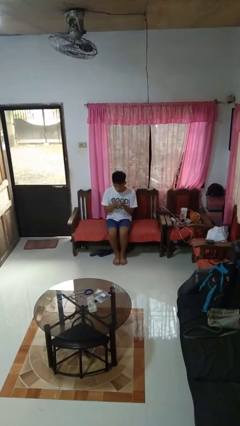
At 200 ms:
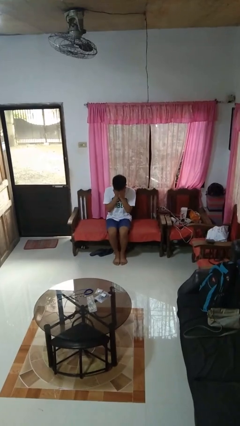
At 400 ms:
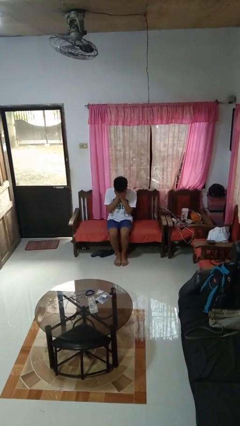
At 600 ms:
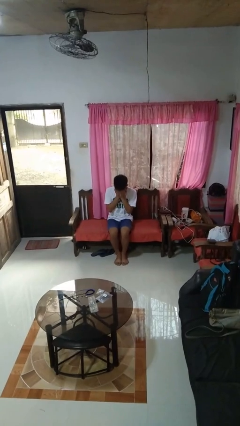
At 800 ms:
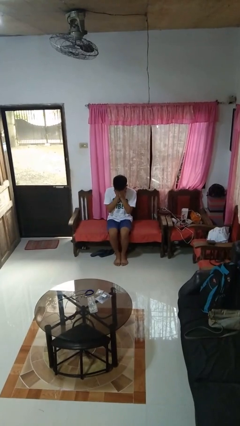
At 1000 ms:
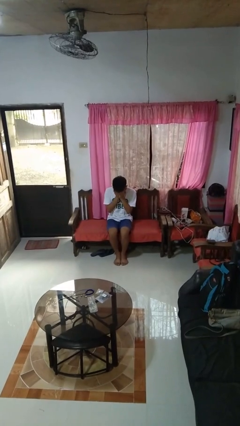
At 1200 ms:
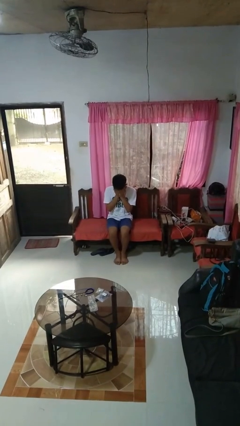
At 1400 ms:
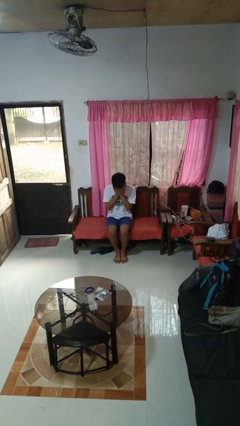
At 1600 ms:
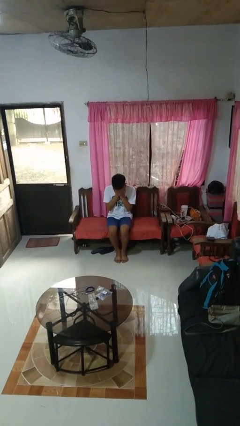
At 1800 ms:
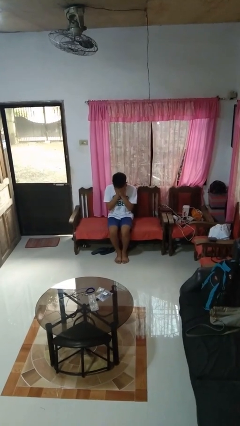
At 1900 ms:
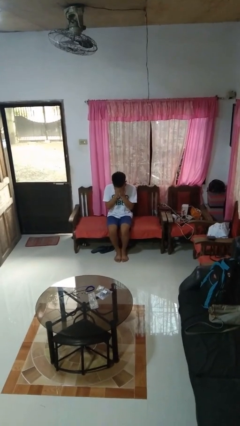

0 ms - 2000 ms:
person covers face with hands

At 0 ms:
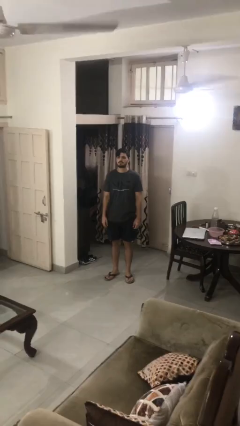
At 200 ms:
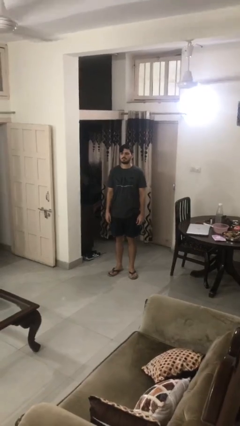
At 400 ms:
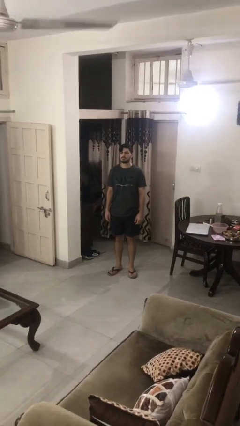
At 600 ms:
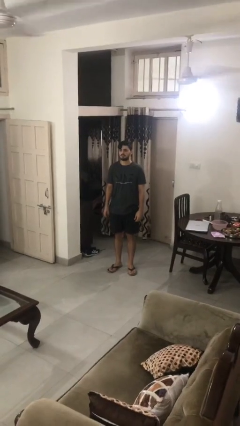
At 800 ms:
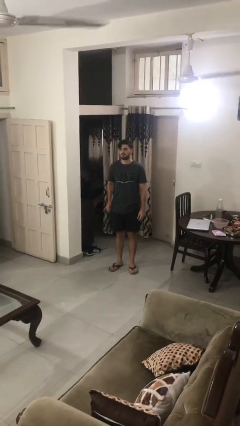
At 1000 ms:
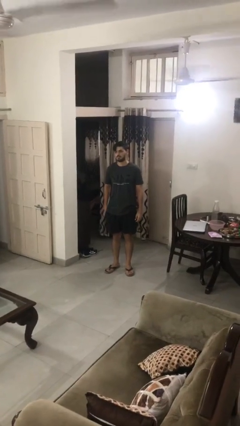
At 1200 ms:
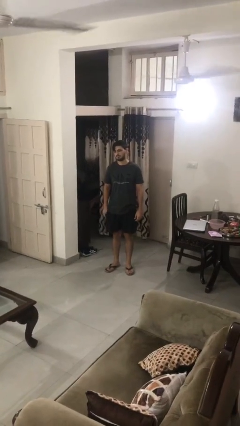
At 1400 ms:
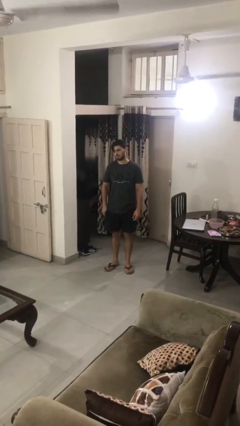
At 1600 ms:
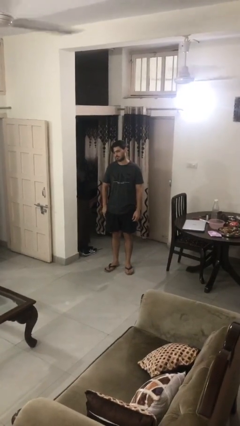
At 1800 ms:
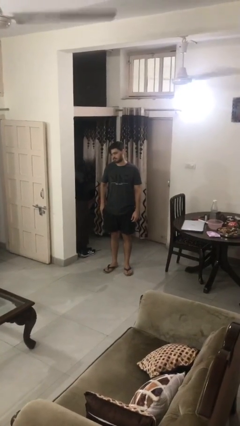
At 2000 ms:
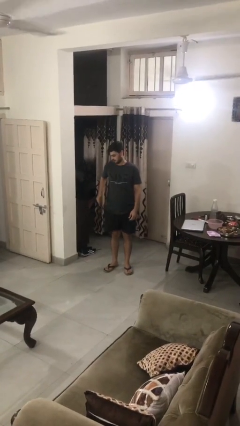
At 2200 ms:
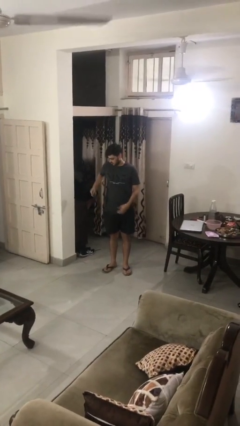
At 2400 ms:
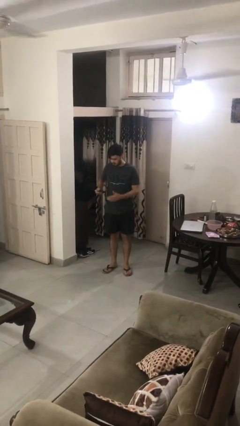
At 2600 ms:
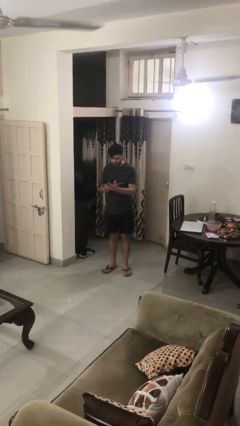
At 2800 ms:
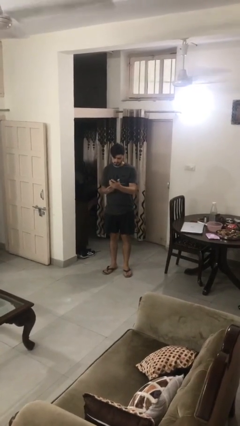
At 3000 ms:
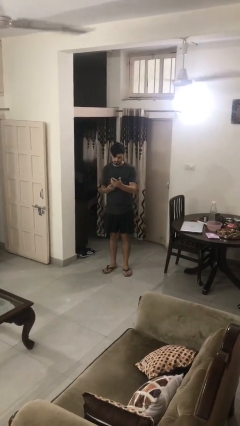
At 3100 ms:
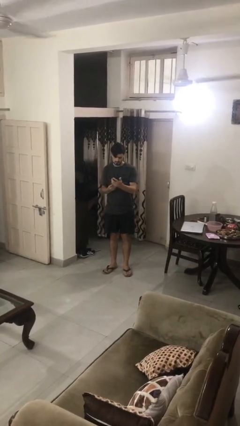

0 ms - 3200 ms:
person takes phone from pocket

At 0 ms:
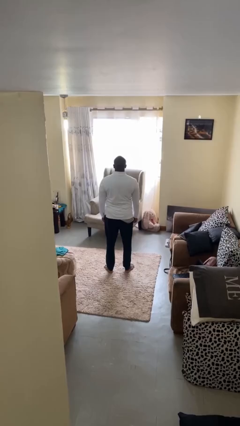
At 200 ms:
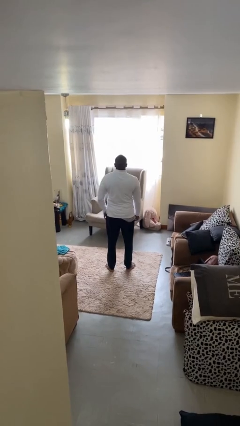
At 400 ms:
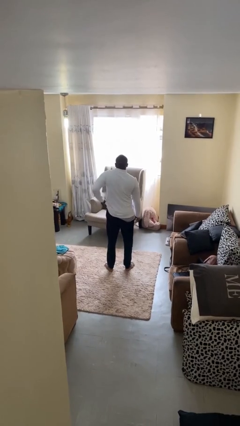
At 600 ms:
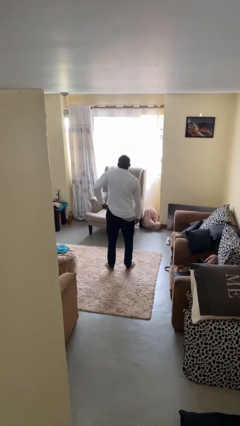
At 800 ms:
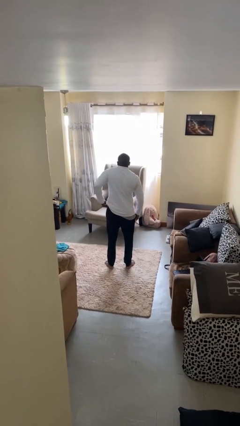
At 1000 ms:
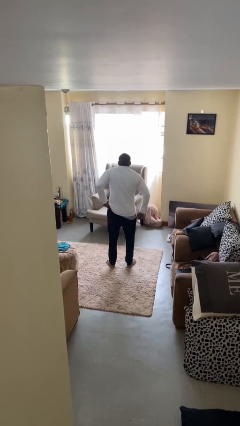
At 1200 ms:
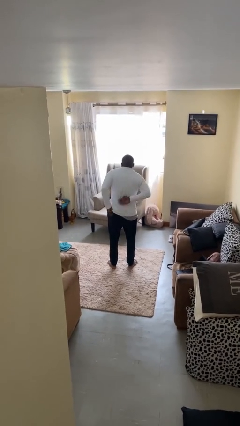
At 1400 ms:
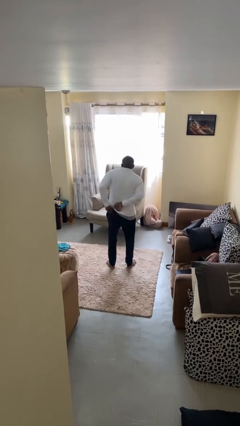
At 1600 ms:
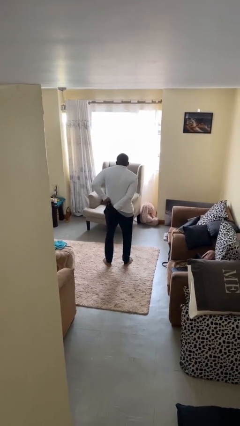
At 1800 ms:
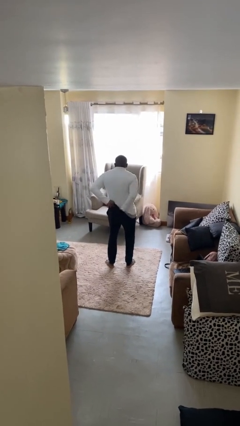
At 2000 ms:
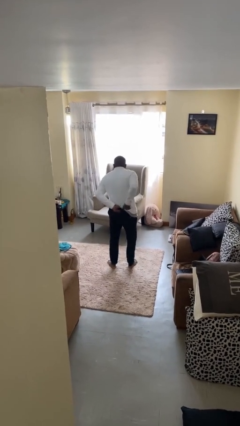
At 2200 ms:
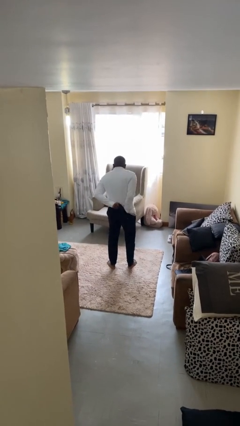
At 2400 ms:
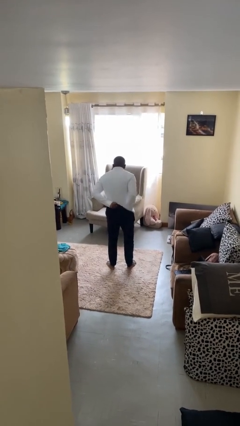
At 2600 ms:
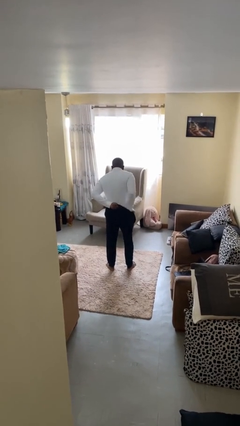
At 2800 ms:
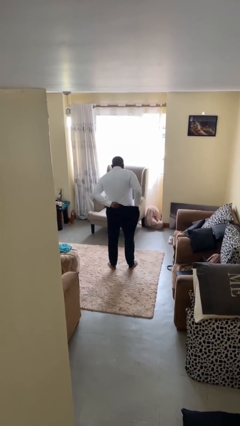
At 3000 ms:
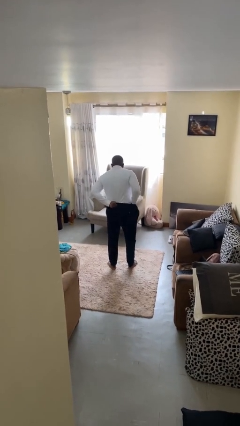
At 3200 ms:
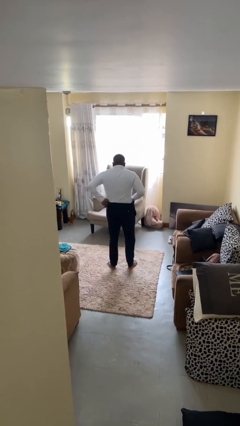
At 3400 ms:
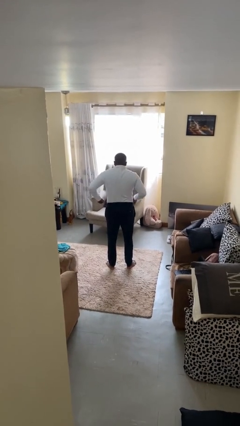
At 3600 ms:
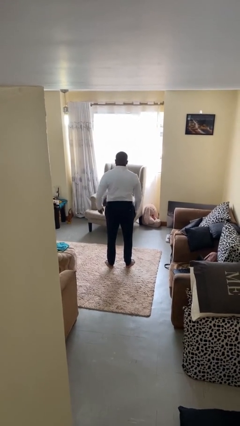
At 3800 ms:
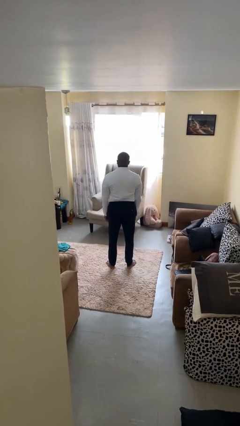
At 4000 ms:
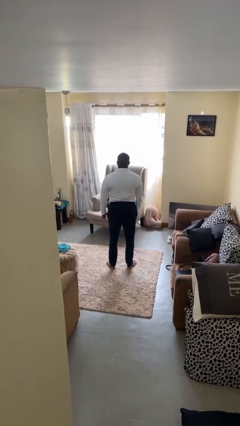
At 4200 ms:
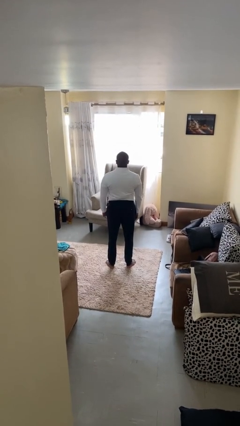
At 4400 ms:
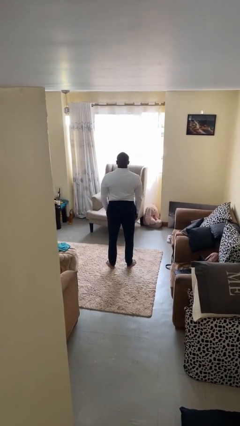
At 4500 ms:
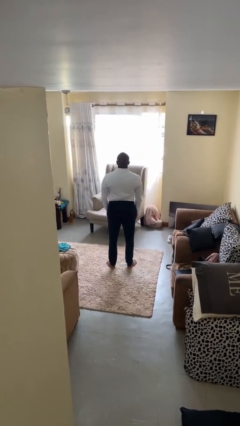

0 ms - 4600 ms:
person tucks in shirt

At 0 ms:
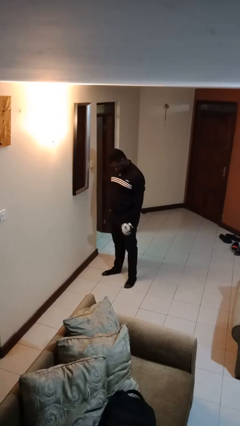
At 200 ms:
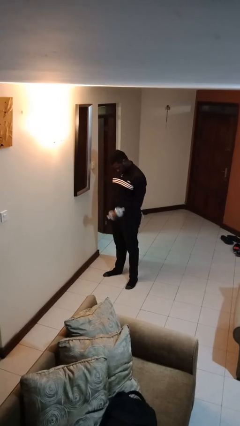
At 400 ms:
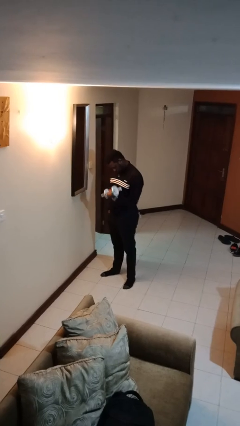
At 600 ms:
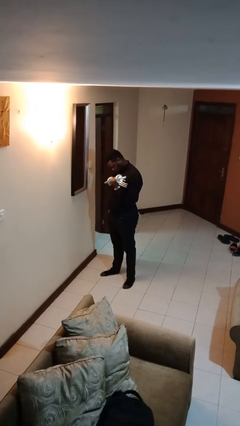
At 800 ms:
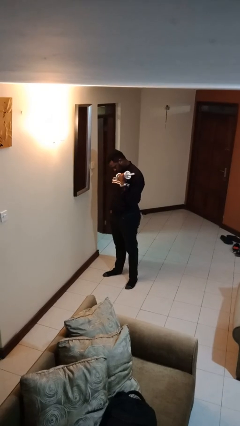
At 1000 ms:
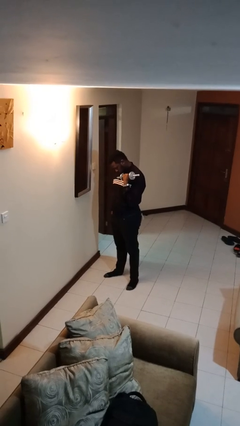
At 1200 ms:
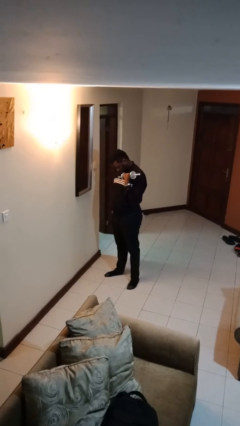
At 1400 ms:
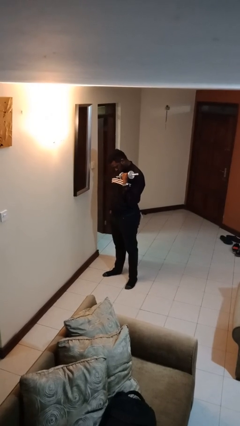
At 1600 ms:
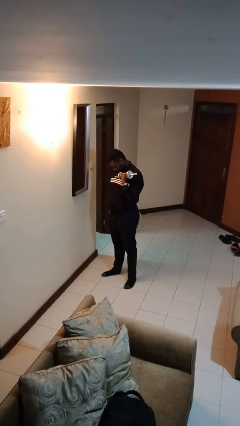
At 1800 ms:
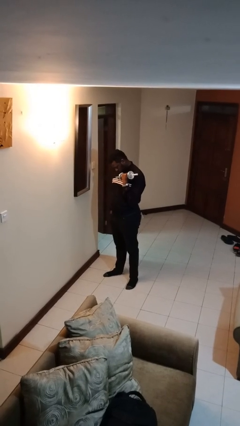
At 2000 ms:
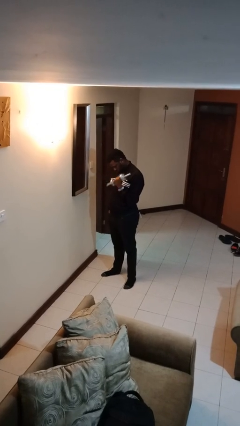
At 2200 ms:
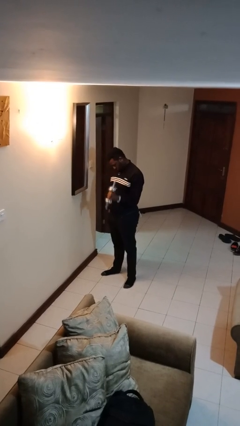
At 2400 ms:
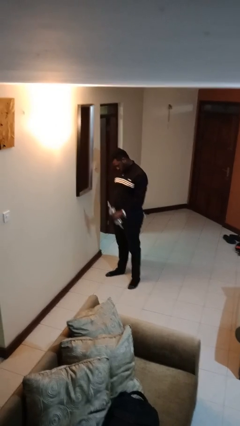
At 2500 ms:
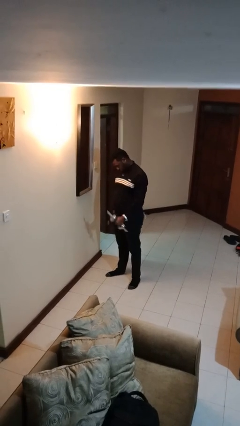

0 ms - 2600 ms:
person lifts dumbbells

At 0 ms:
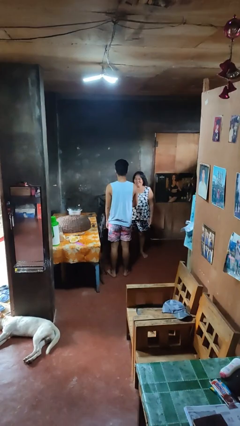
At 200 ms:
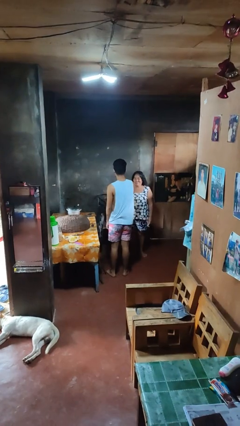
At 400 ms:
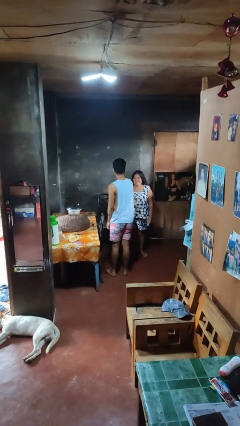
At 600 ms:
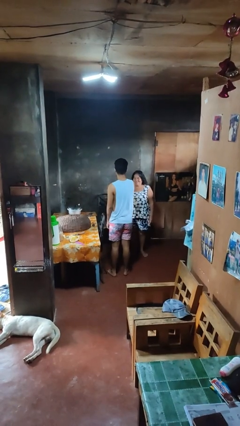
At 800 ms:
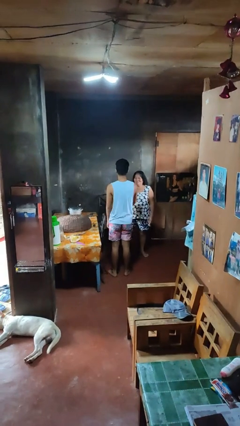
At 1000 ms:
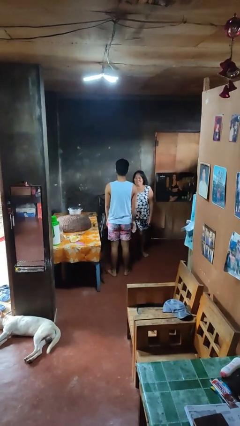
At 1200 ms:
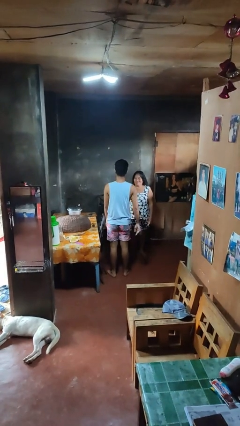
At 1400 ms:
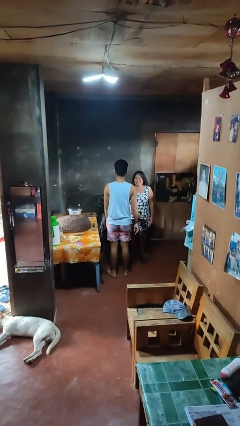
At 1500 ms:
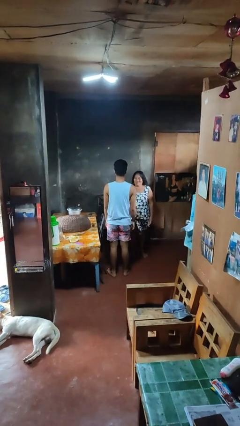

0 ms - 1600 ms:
person shoves person

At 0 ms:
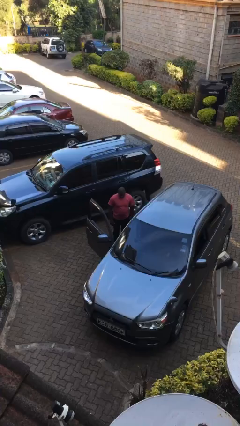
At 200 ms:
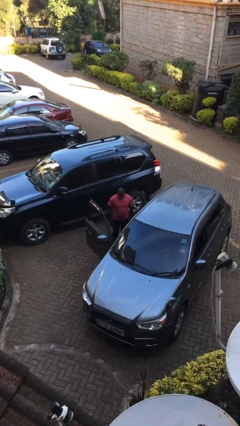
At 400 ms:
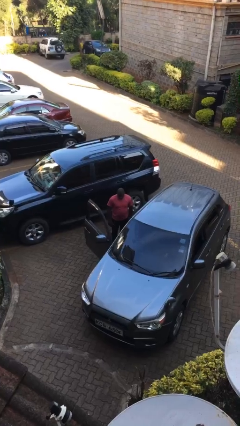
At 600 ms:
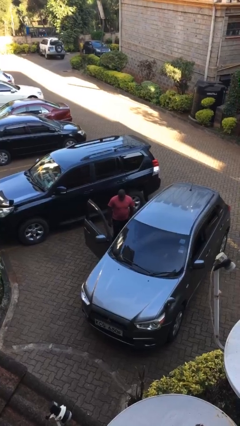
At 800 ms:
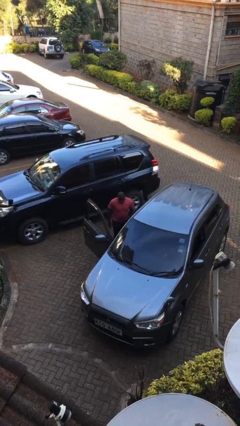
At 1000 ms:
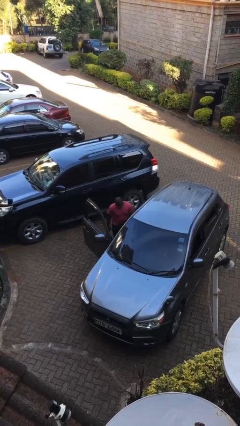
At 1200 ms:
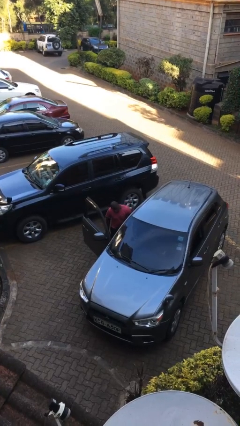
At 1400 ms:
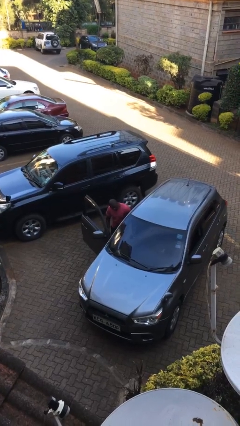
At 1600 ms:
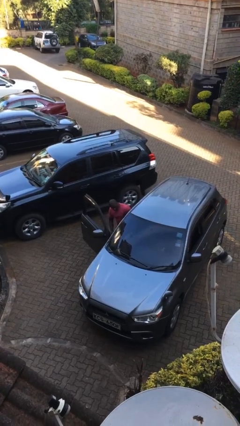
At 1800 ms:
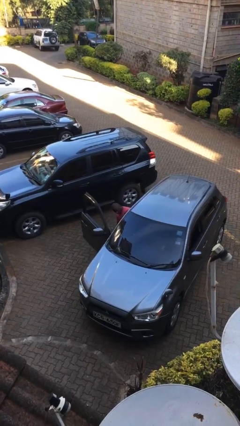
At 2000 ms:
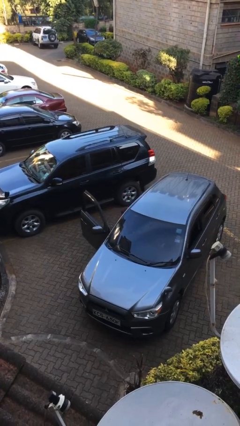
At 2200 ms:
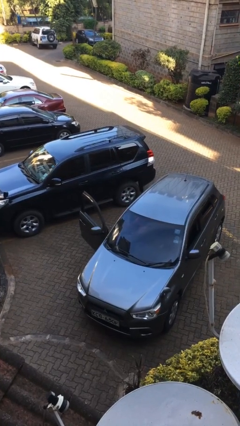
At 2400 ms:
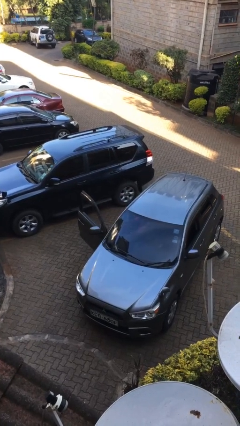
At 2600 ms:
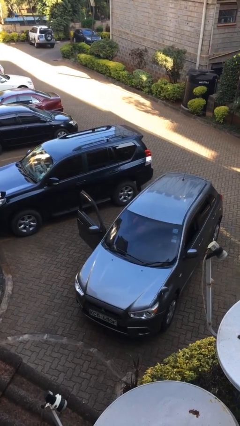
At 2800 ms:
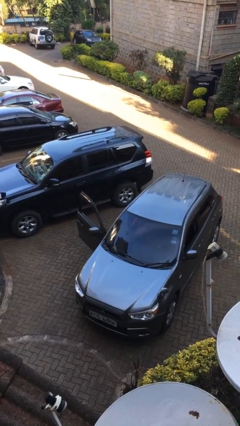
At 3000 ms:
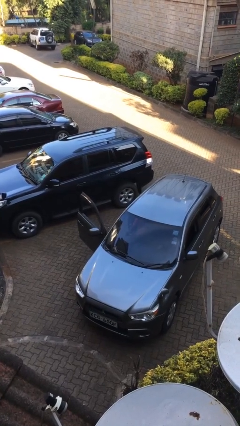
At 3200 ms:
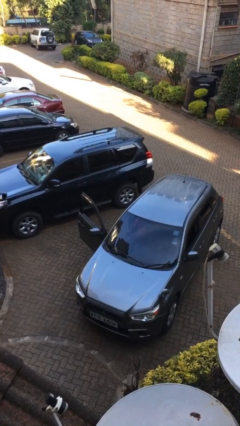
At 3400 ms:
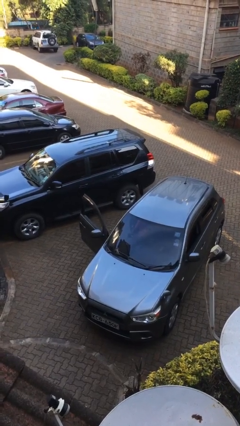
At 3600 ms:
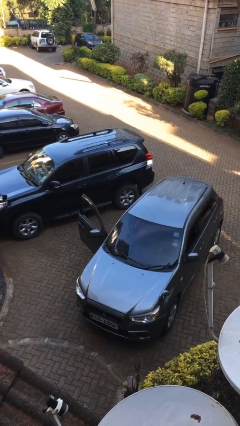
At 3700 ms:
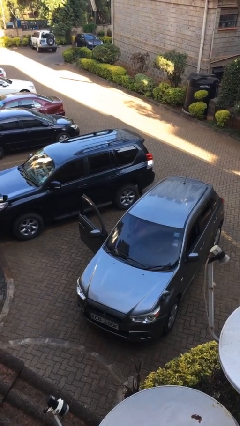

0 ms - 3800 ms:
person enters car
